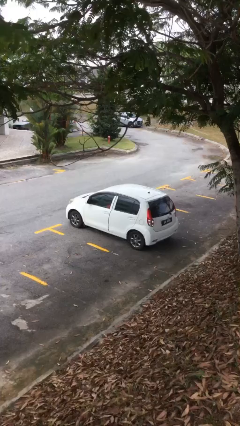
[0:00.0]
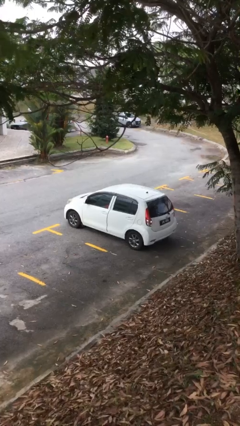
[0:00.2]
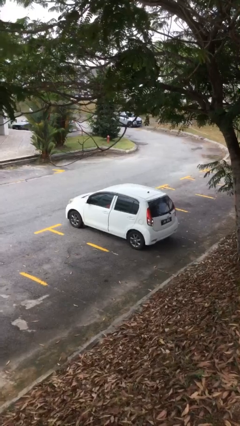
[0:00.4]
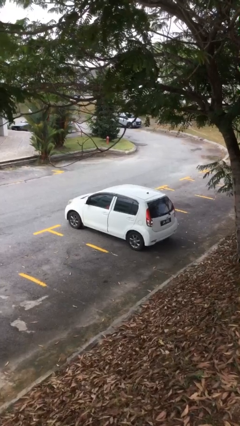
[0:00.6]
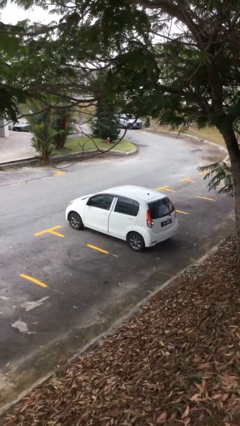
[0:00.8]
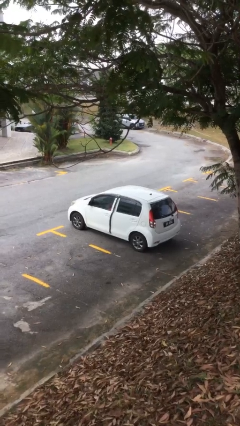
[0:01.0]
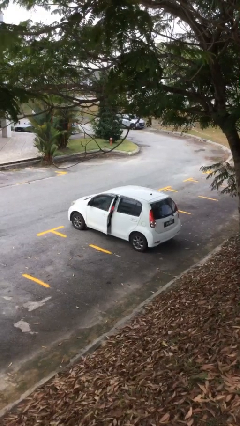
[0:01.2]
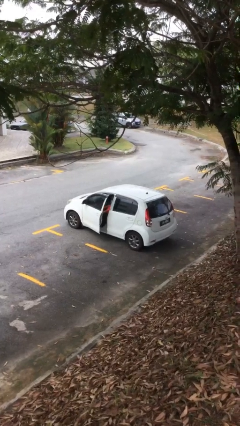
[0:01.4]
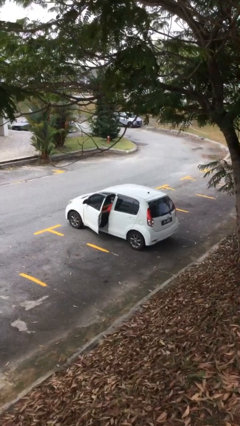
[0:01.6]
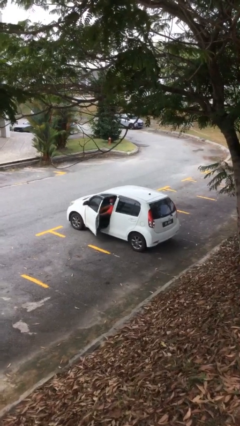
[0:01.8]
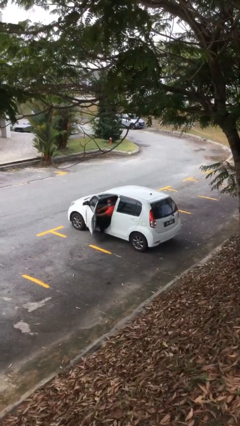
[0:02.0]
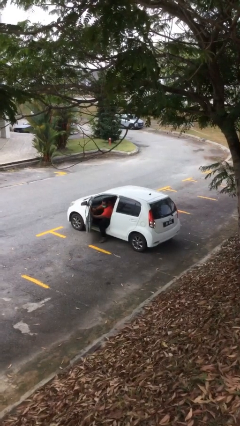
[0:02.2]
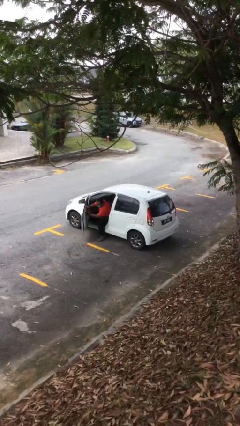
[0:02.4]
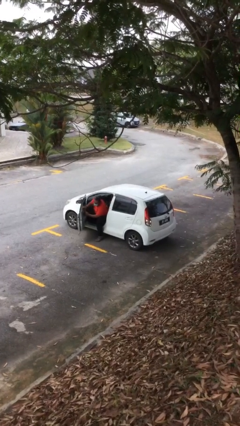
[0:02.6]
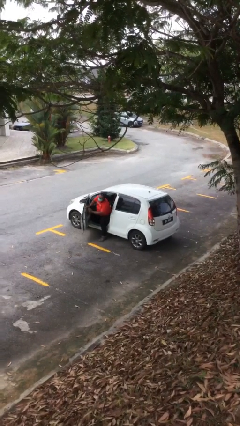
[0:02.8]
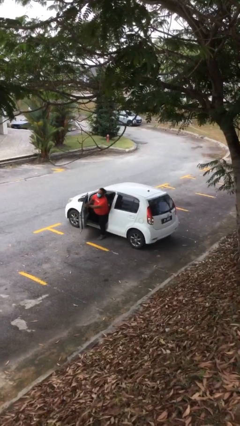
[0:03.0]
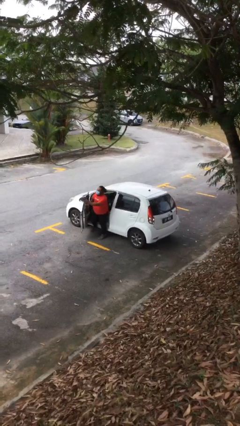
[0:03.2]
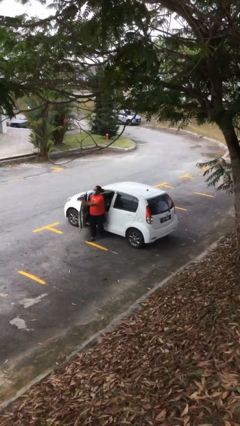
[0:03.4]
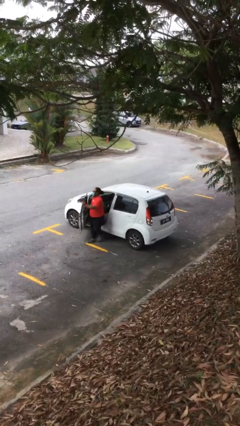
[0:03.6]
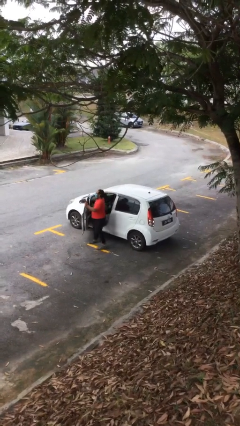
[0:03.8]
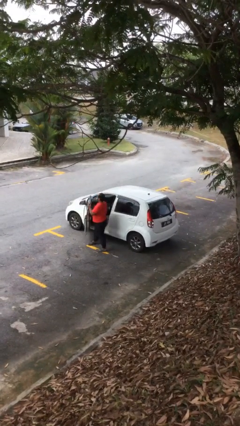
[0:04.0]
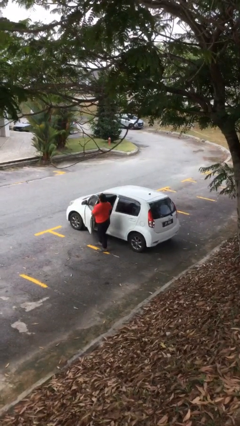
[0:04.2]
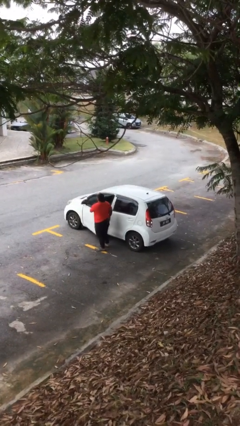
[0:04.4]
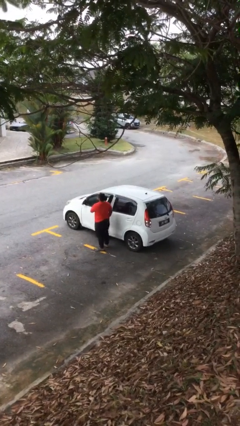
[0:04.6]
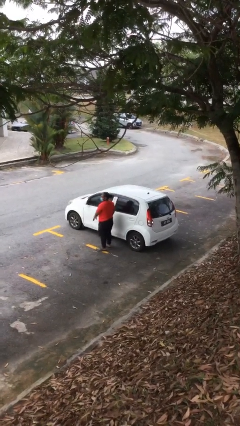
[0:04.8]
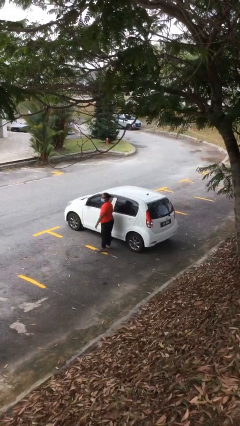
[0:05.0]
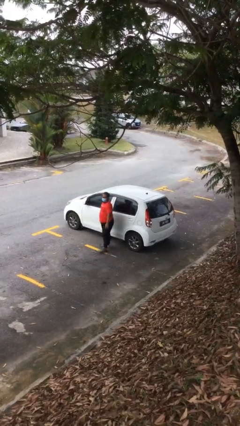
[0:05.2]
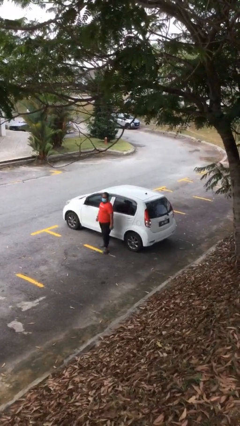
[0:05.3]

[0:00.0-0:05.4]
car drops off person

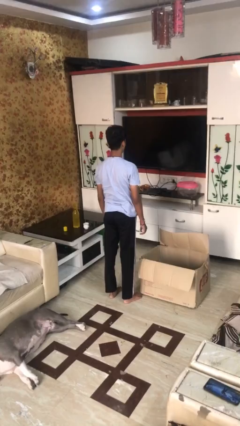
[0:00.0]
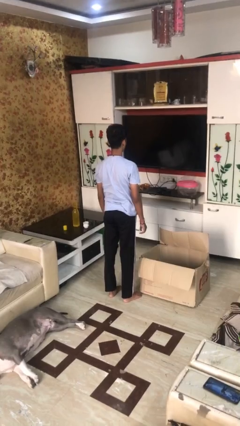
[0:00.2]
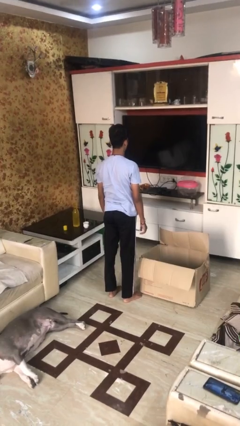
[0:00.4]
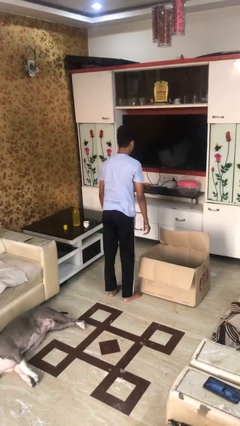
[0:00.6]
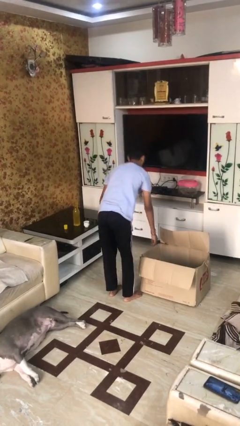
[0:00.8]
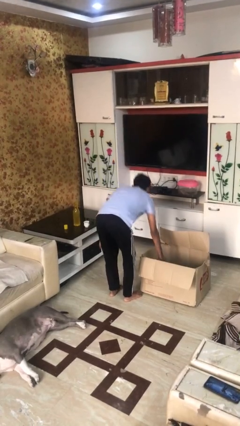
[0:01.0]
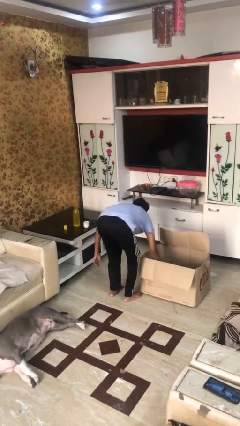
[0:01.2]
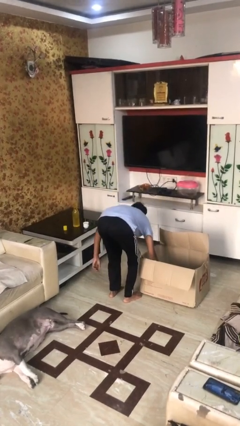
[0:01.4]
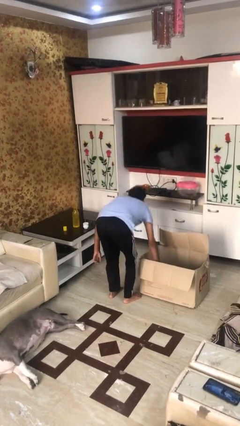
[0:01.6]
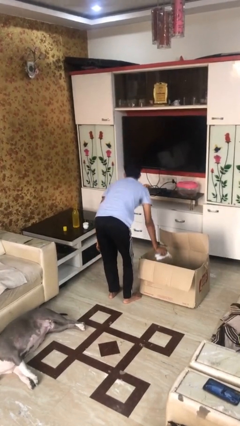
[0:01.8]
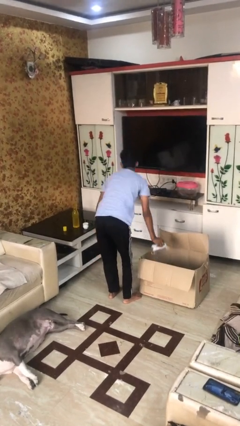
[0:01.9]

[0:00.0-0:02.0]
person takes object from box

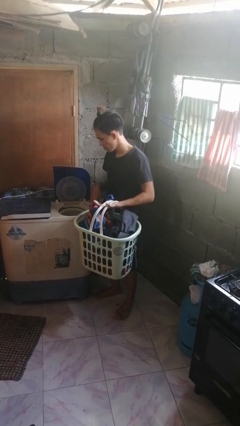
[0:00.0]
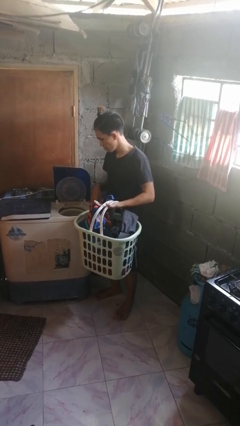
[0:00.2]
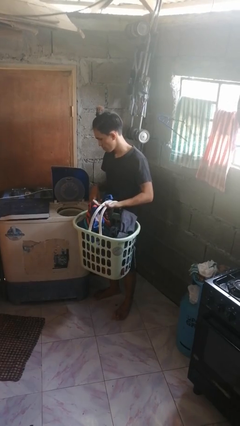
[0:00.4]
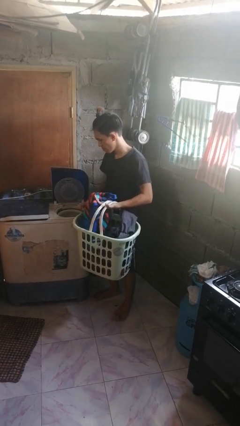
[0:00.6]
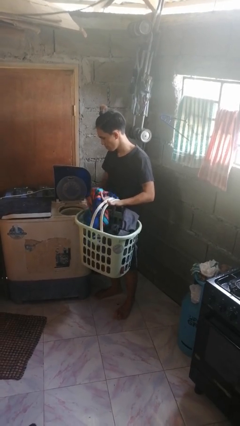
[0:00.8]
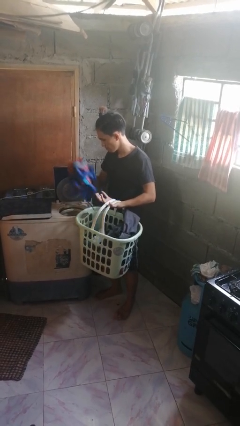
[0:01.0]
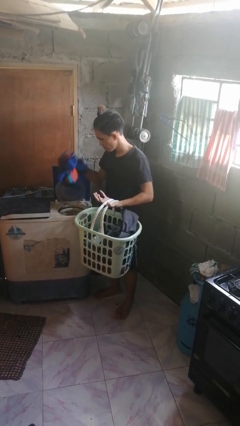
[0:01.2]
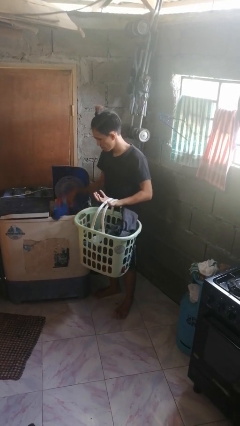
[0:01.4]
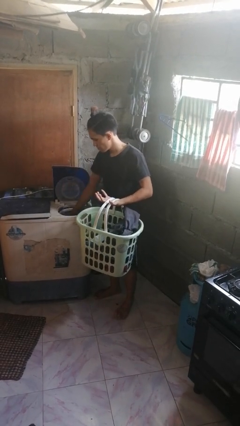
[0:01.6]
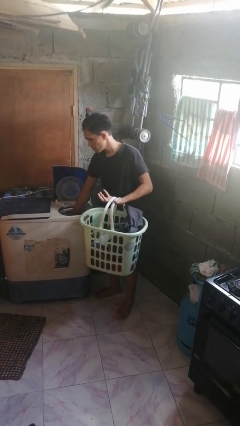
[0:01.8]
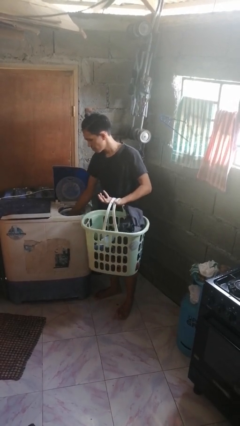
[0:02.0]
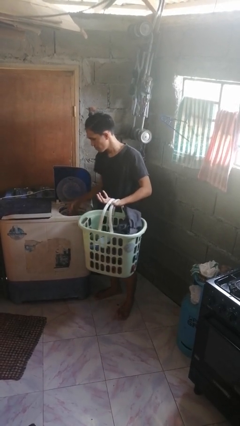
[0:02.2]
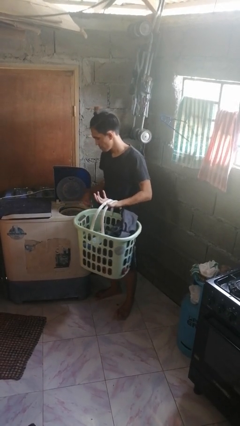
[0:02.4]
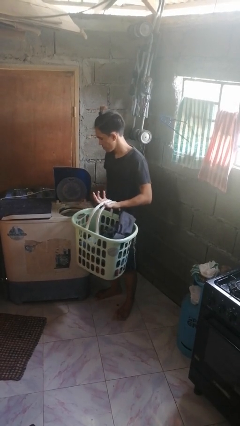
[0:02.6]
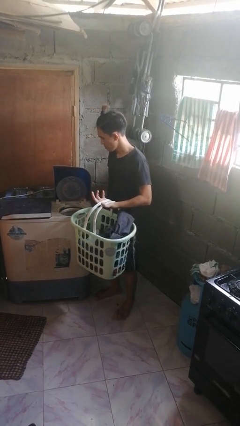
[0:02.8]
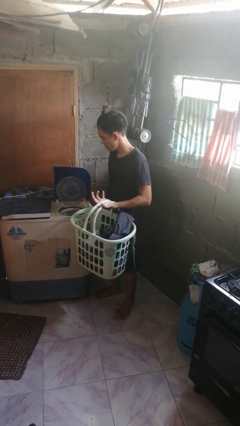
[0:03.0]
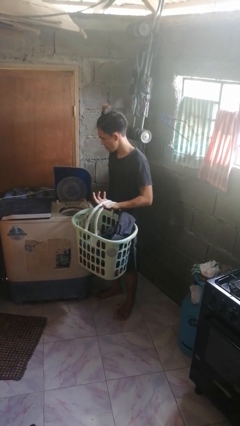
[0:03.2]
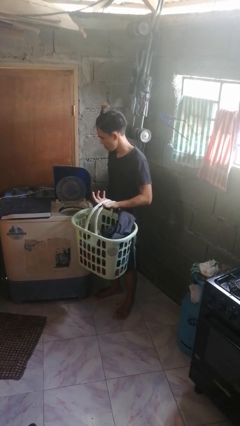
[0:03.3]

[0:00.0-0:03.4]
person loads dryer

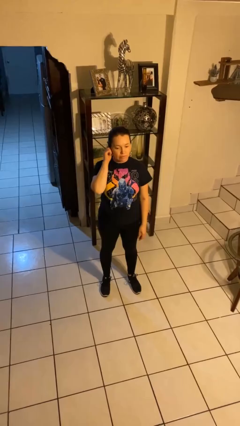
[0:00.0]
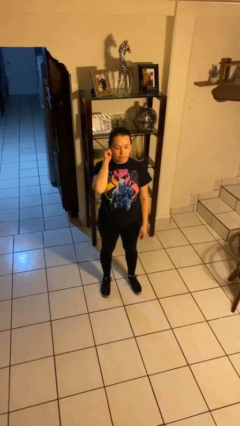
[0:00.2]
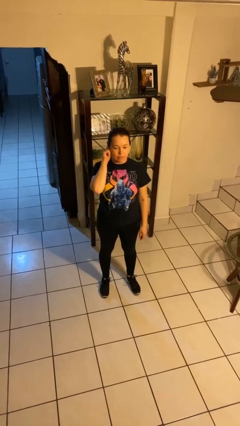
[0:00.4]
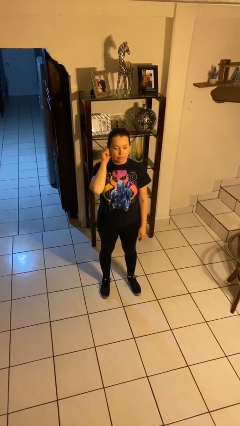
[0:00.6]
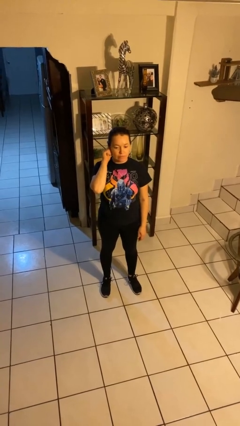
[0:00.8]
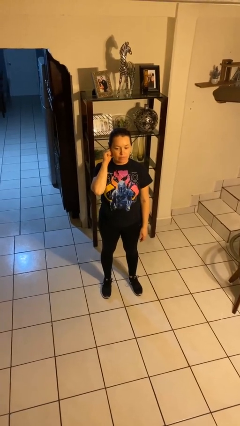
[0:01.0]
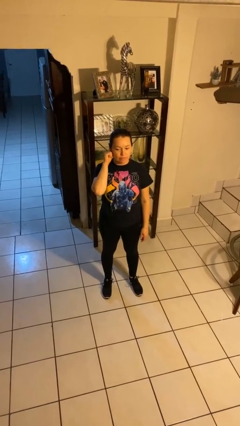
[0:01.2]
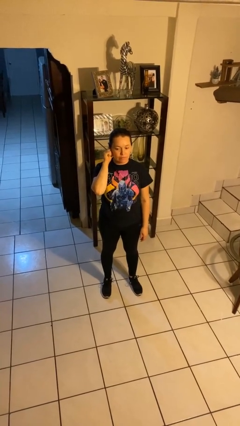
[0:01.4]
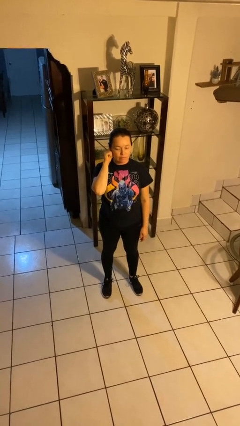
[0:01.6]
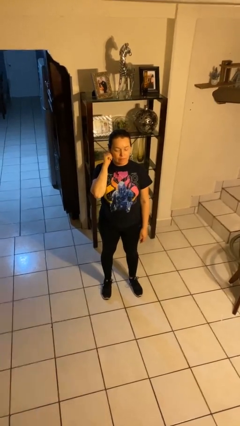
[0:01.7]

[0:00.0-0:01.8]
person touches earlobe

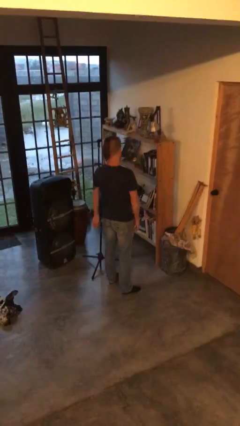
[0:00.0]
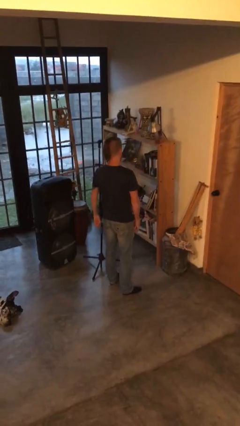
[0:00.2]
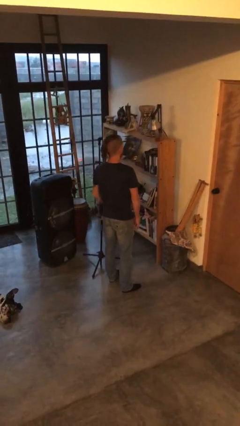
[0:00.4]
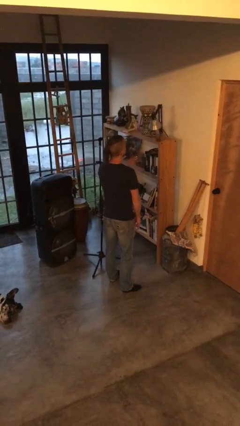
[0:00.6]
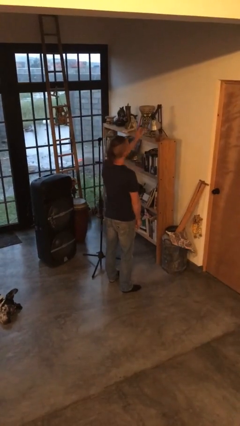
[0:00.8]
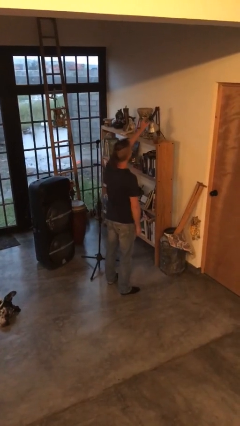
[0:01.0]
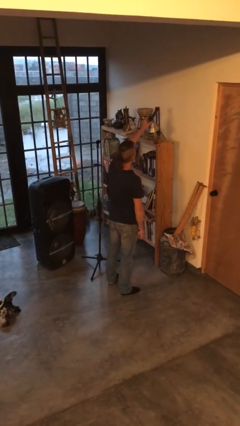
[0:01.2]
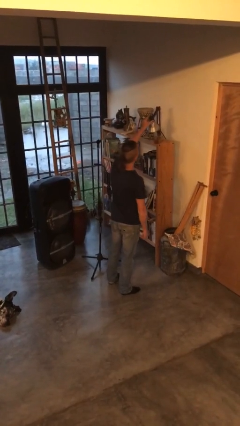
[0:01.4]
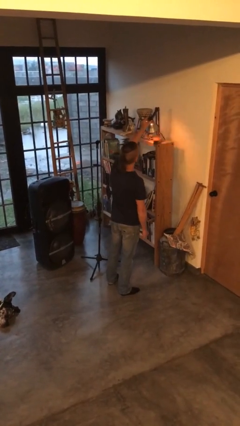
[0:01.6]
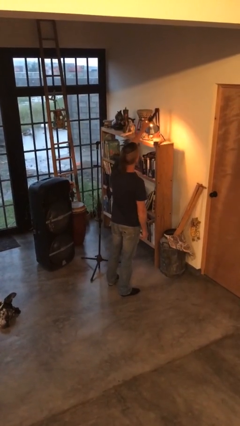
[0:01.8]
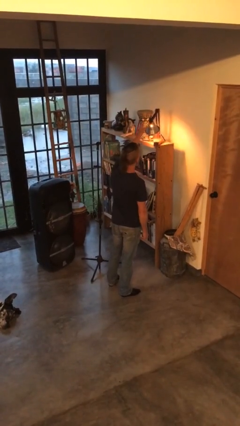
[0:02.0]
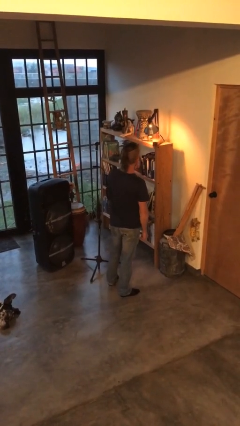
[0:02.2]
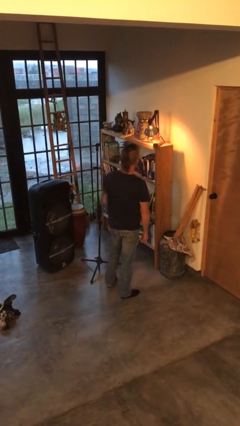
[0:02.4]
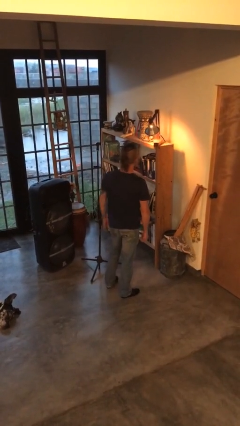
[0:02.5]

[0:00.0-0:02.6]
person turns on lamp

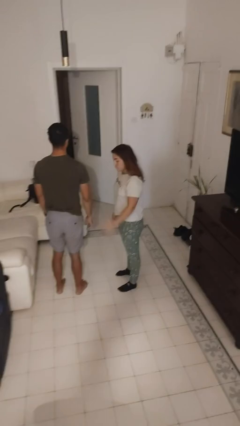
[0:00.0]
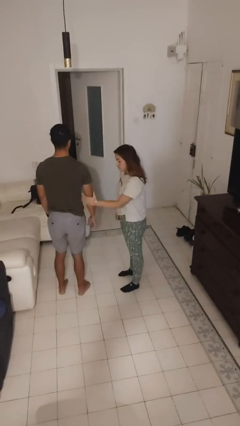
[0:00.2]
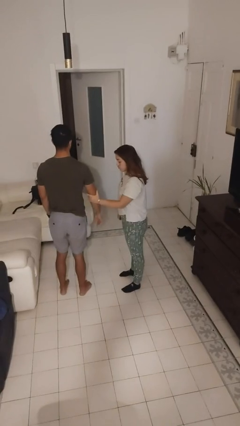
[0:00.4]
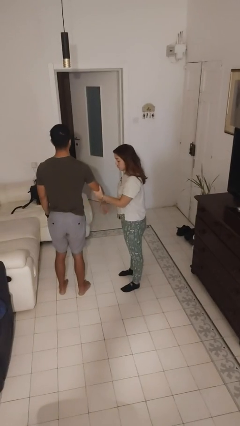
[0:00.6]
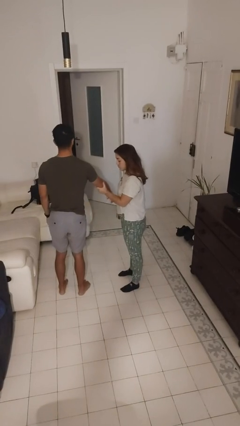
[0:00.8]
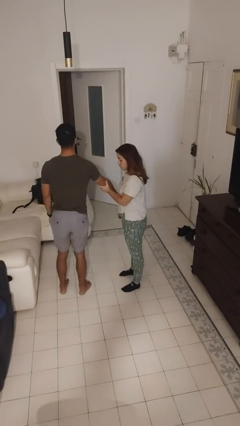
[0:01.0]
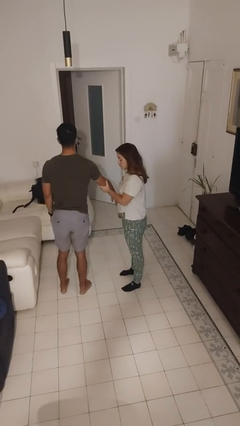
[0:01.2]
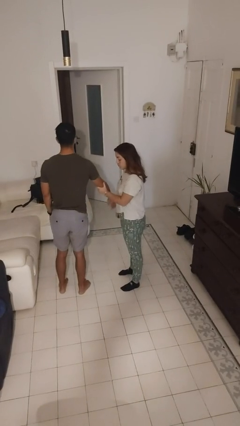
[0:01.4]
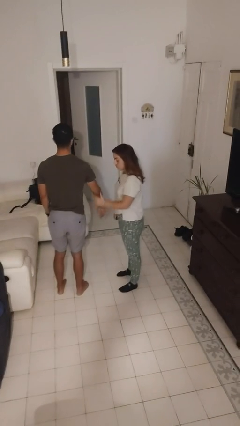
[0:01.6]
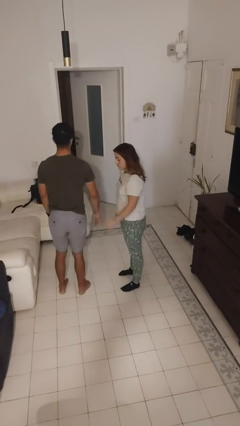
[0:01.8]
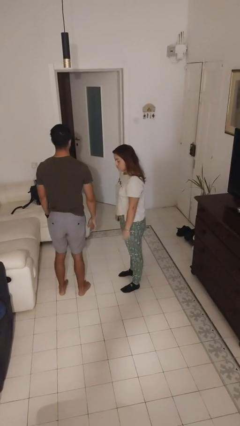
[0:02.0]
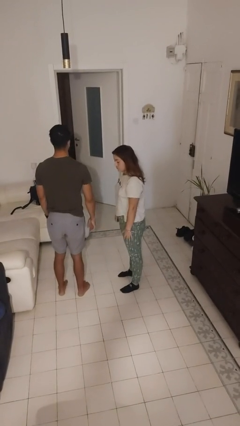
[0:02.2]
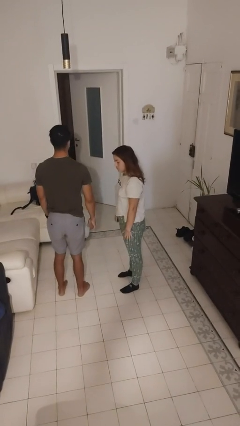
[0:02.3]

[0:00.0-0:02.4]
person grabs person by forearm
